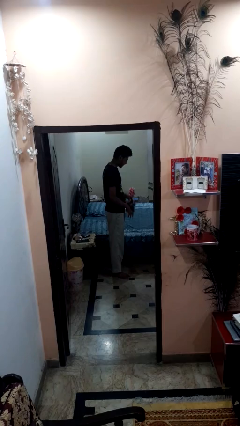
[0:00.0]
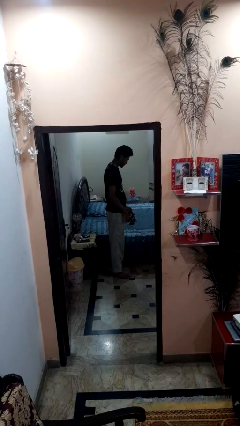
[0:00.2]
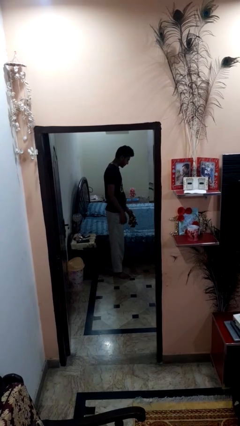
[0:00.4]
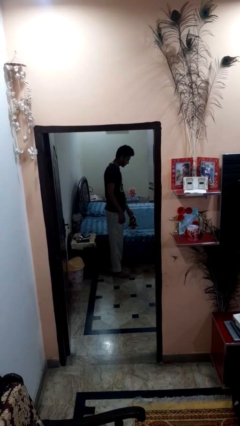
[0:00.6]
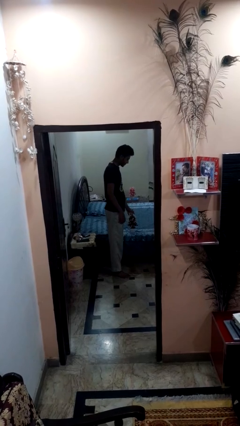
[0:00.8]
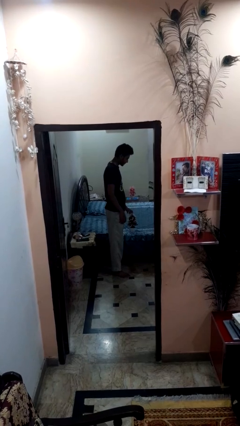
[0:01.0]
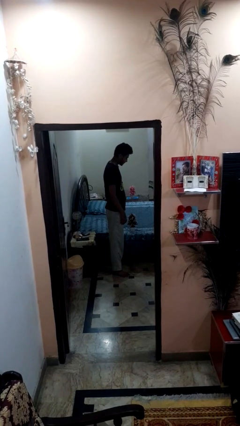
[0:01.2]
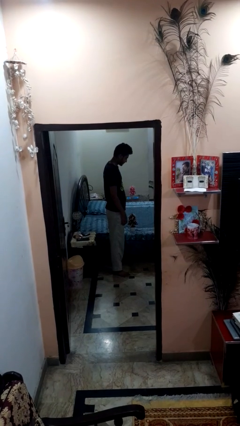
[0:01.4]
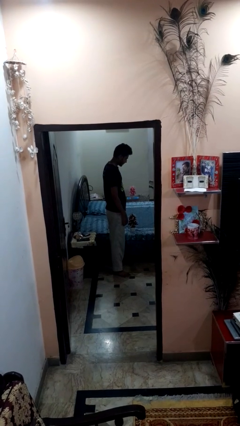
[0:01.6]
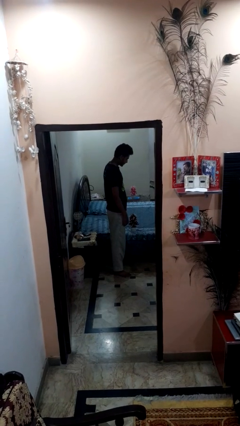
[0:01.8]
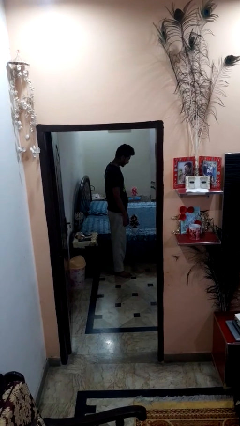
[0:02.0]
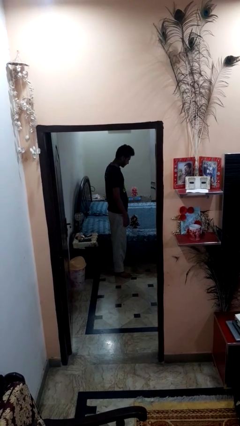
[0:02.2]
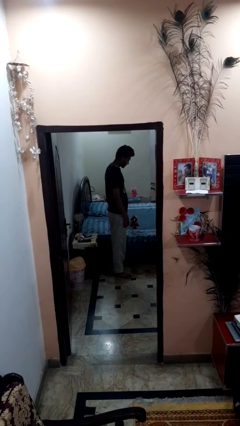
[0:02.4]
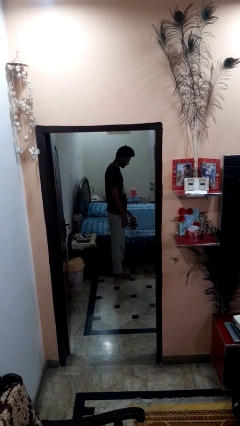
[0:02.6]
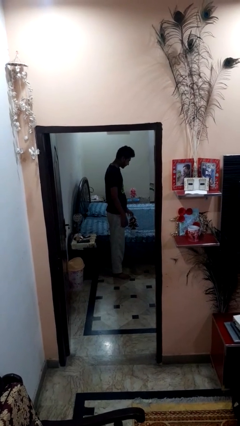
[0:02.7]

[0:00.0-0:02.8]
person puts down object on bed

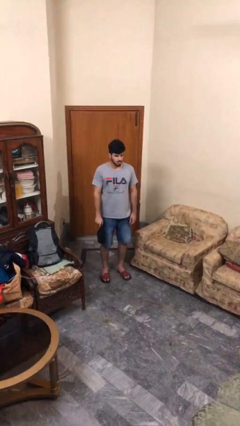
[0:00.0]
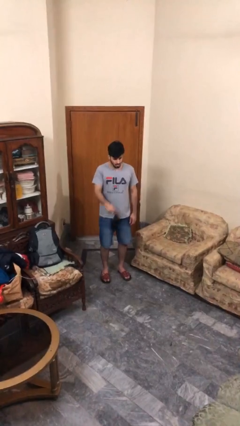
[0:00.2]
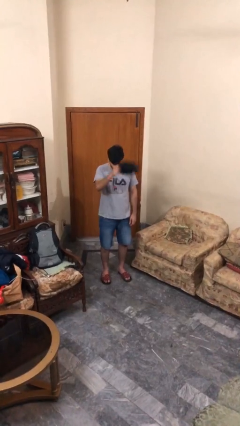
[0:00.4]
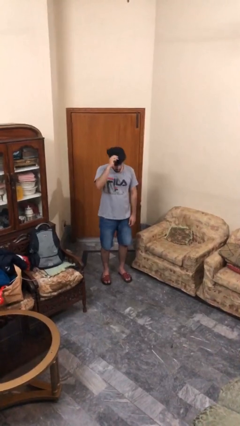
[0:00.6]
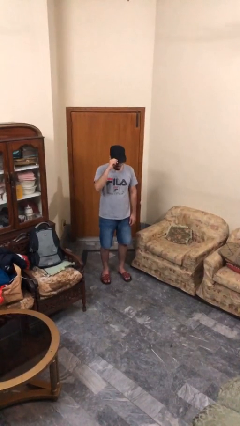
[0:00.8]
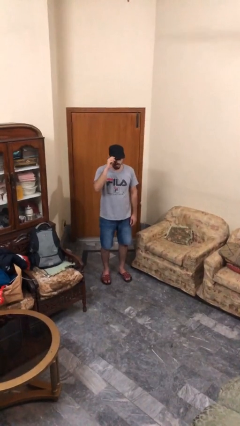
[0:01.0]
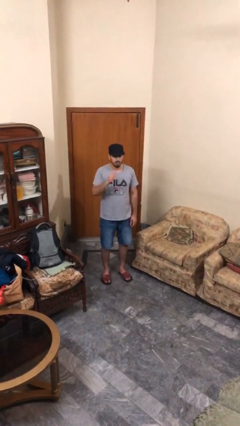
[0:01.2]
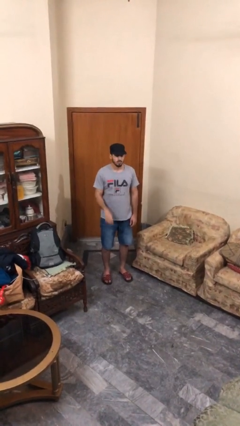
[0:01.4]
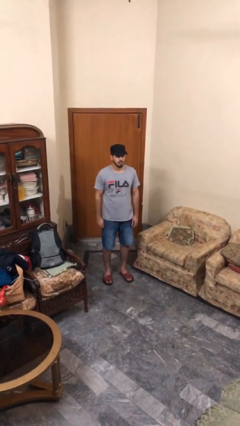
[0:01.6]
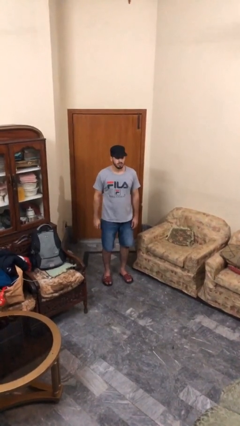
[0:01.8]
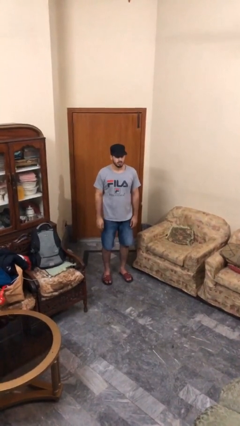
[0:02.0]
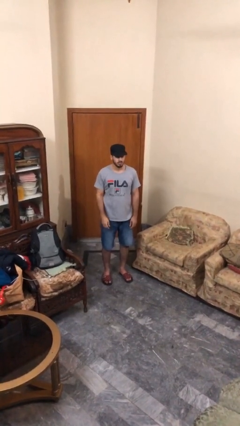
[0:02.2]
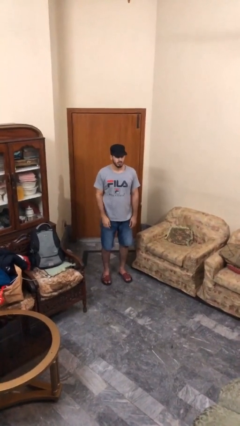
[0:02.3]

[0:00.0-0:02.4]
person puts on hat

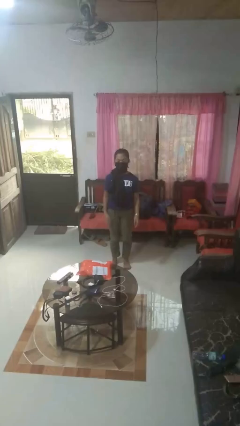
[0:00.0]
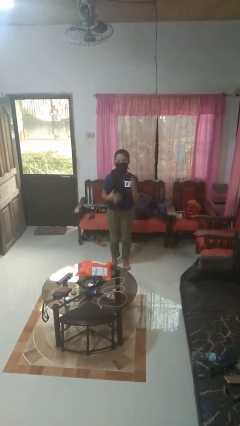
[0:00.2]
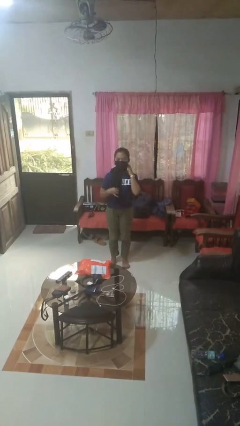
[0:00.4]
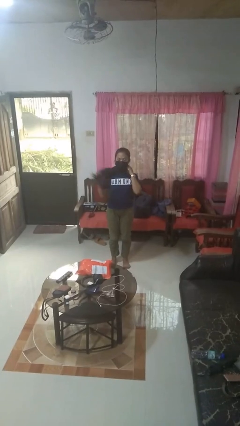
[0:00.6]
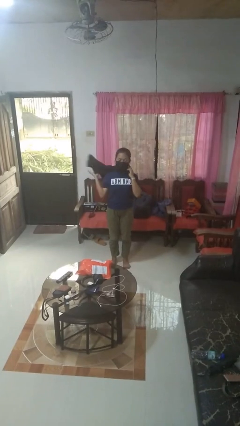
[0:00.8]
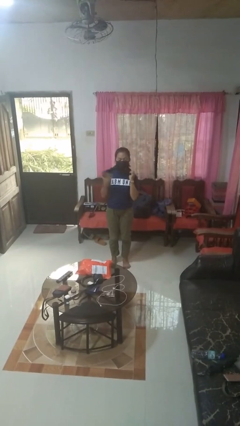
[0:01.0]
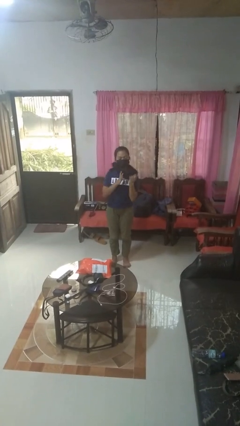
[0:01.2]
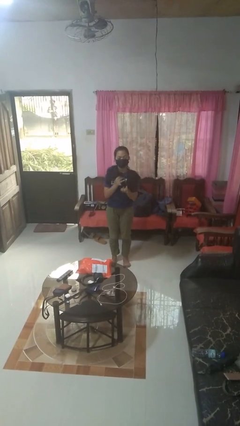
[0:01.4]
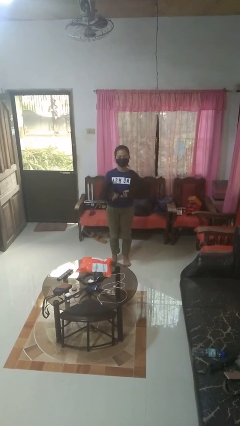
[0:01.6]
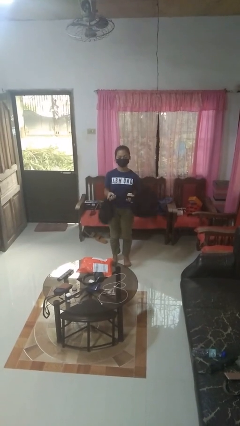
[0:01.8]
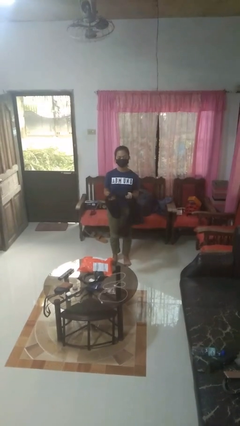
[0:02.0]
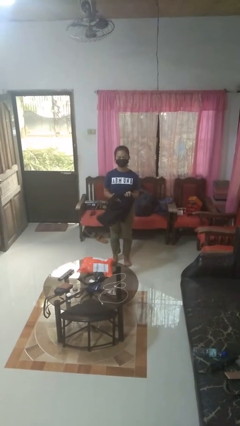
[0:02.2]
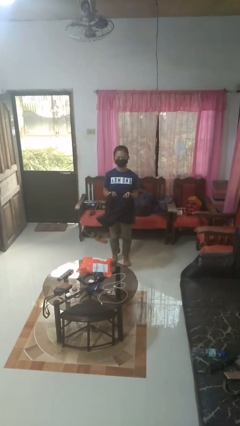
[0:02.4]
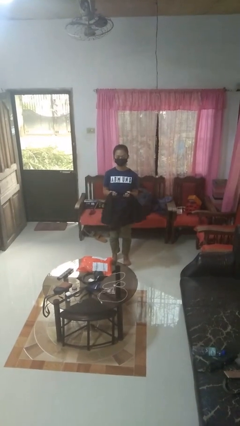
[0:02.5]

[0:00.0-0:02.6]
person takes off scarf

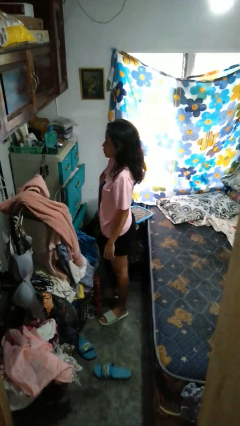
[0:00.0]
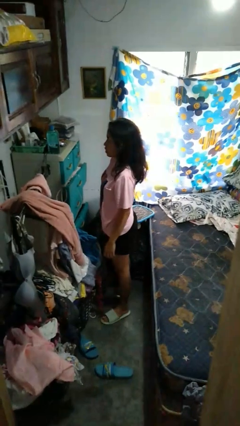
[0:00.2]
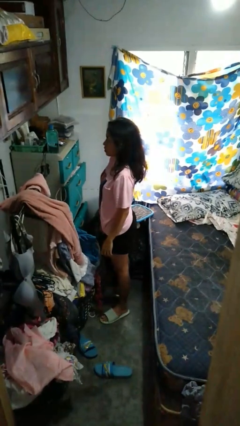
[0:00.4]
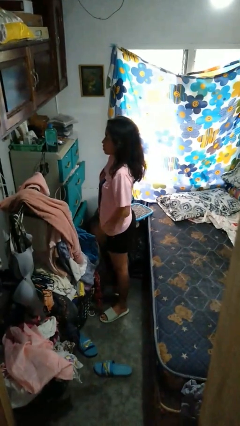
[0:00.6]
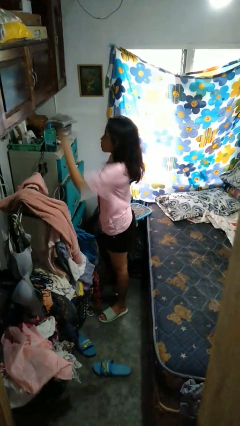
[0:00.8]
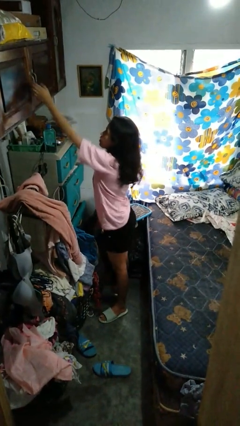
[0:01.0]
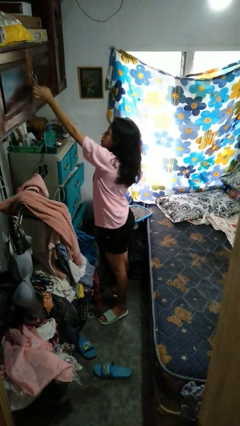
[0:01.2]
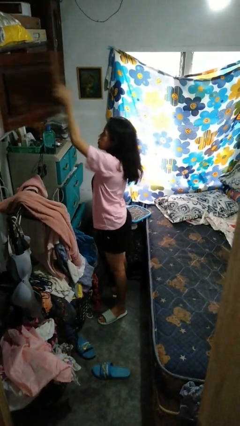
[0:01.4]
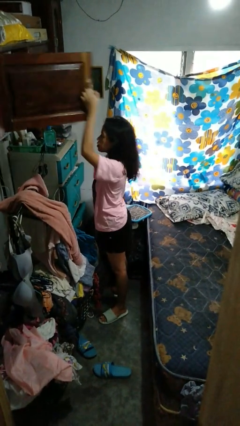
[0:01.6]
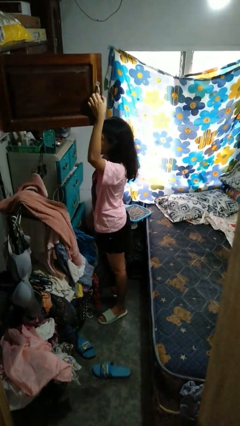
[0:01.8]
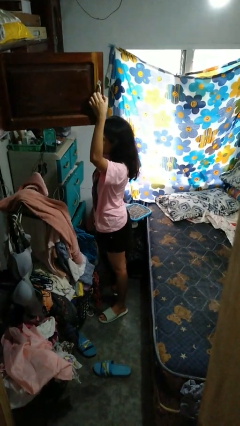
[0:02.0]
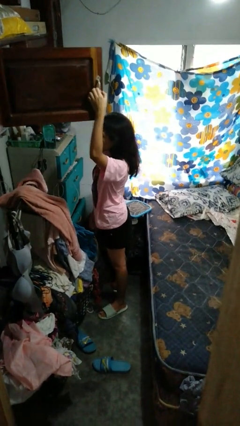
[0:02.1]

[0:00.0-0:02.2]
person opens closet door

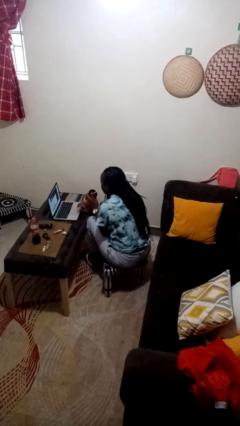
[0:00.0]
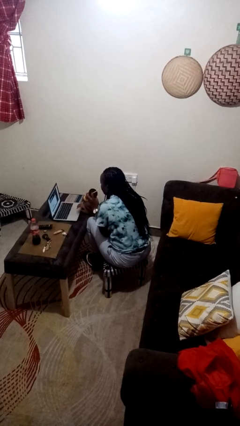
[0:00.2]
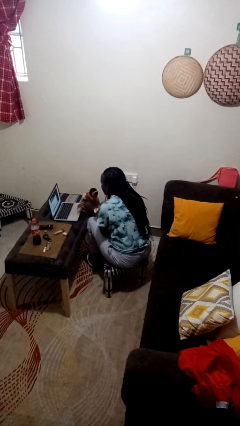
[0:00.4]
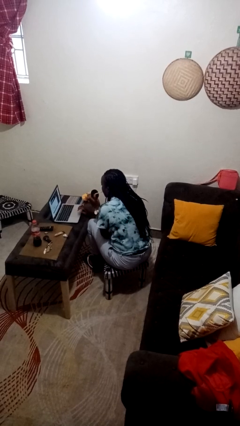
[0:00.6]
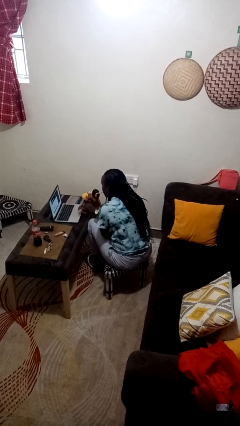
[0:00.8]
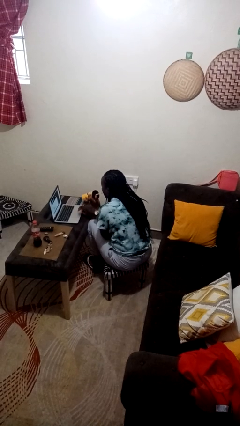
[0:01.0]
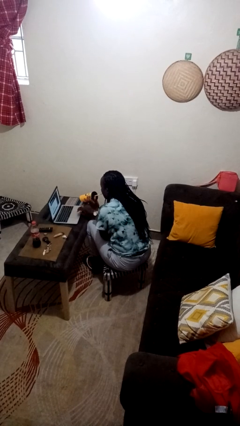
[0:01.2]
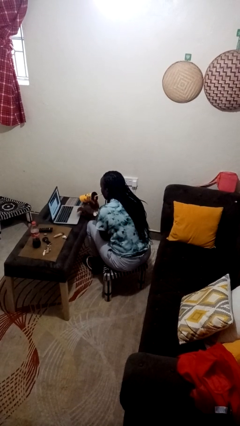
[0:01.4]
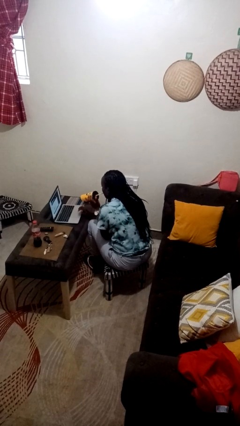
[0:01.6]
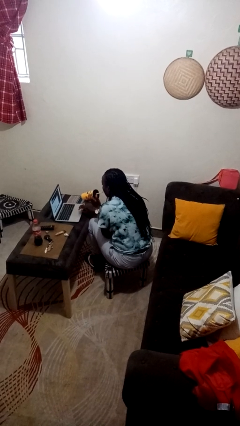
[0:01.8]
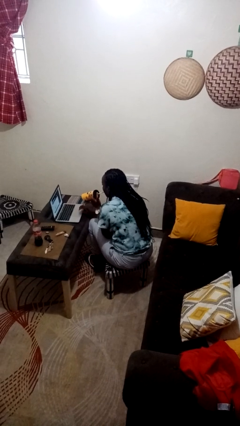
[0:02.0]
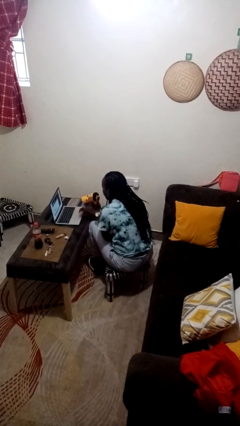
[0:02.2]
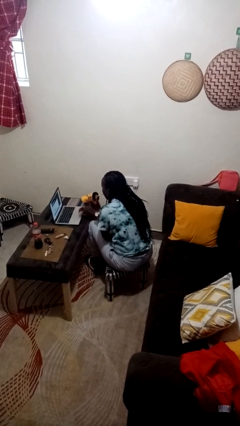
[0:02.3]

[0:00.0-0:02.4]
person drinks from straw

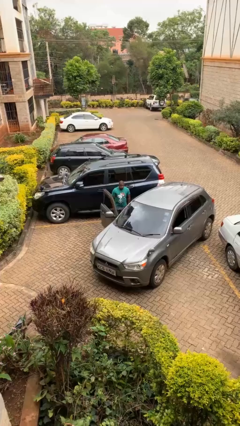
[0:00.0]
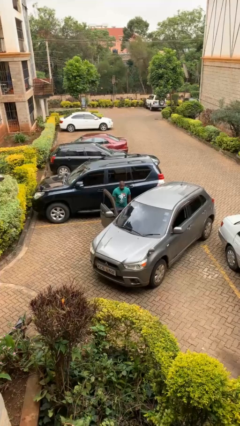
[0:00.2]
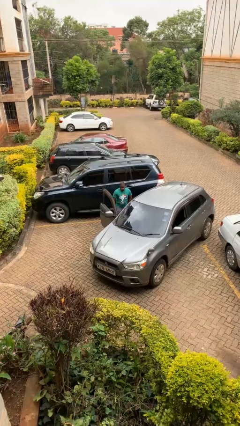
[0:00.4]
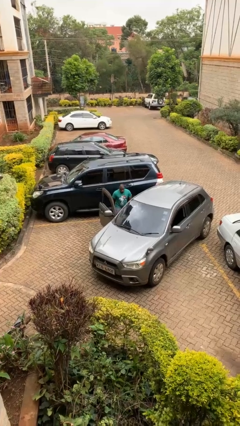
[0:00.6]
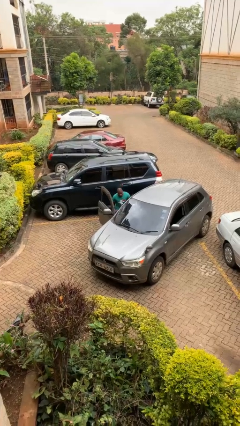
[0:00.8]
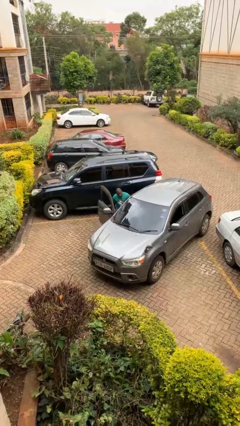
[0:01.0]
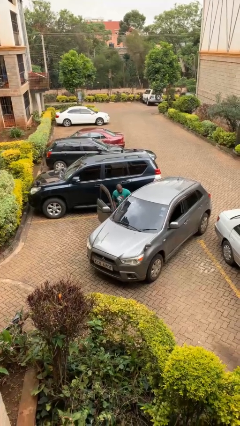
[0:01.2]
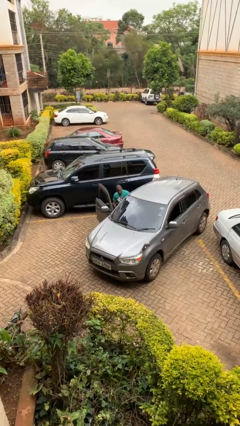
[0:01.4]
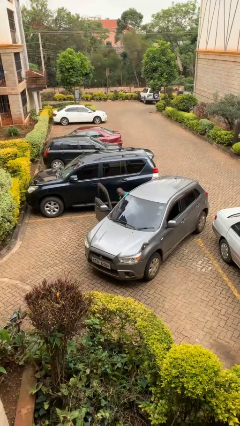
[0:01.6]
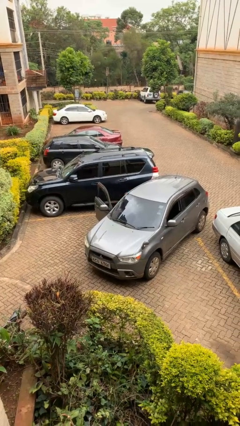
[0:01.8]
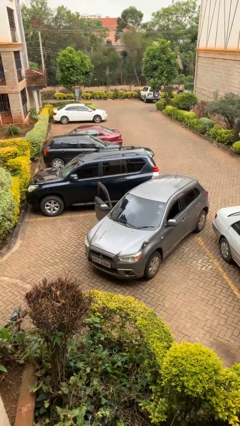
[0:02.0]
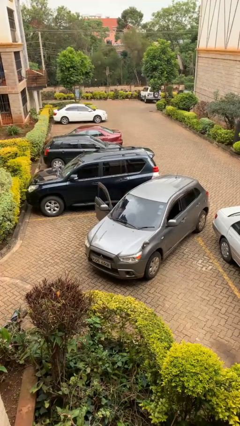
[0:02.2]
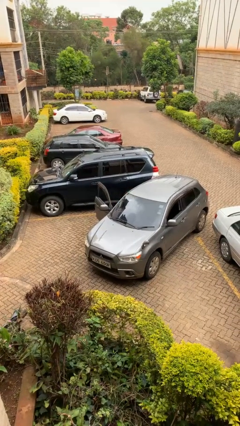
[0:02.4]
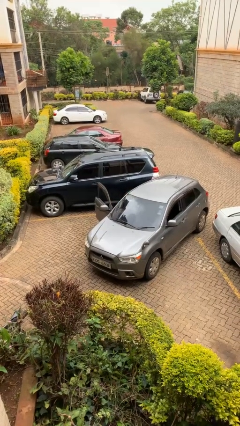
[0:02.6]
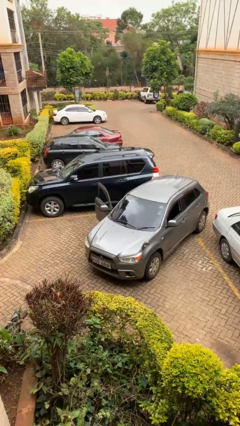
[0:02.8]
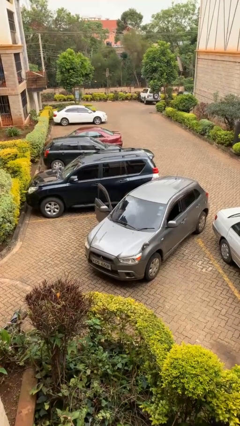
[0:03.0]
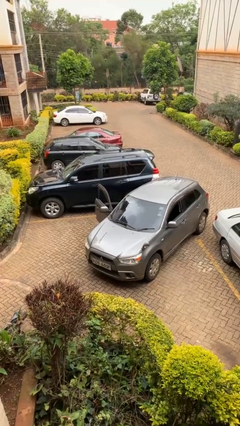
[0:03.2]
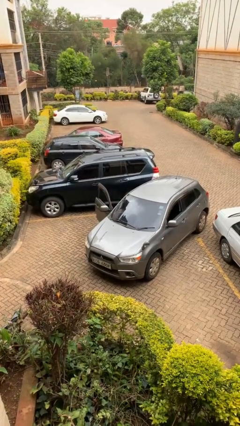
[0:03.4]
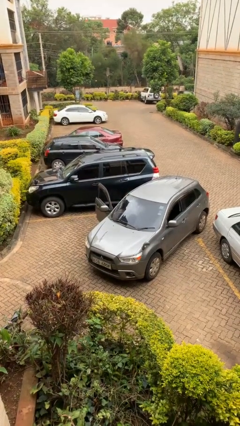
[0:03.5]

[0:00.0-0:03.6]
person enters car

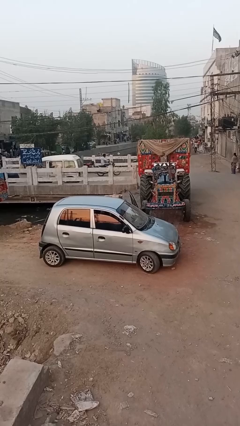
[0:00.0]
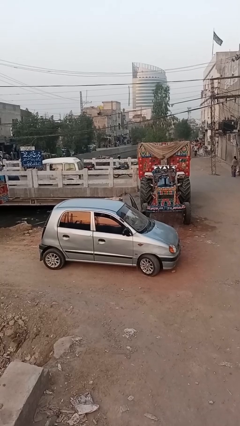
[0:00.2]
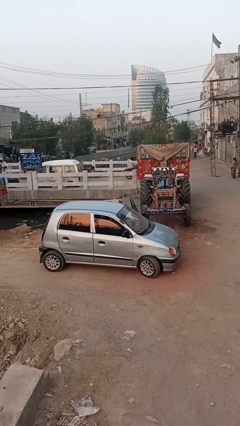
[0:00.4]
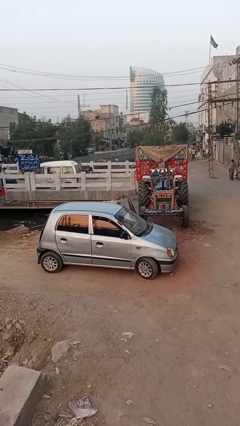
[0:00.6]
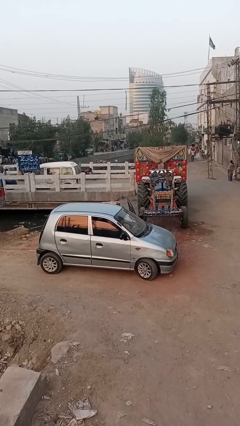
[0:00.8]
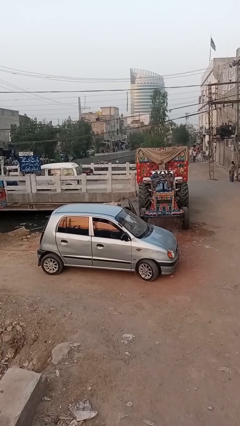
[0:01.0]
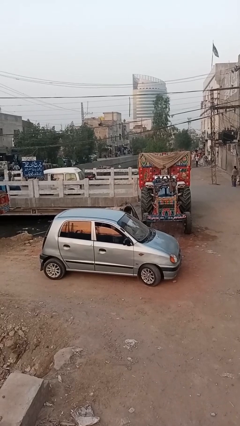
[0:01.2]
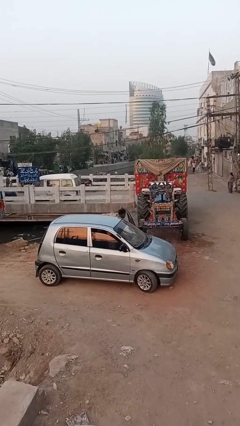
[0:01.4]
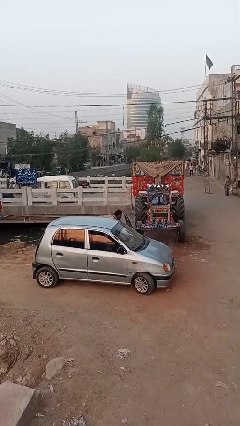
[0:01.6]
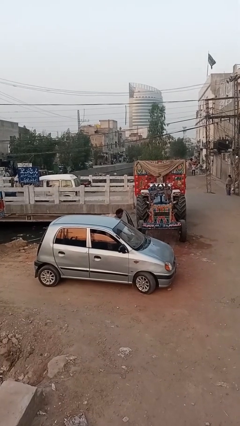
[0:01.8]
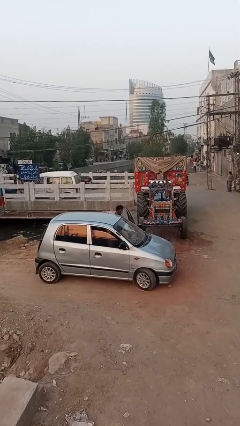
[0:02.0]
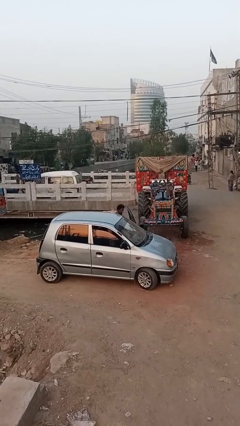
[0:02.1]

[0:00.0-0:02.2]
person exits car
